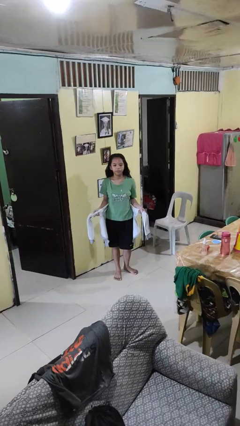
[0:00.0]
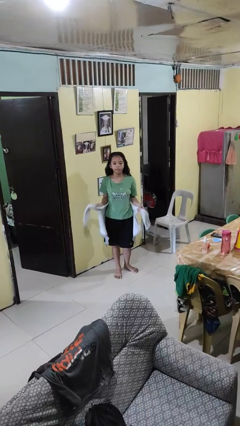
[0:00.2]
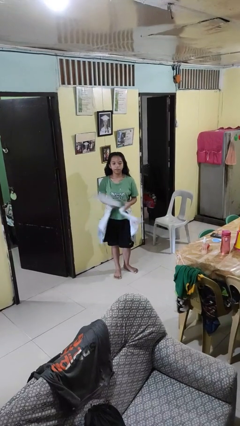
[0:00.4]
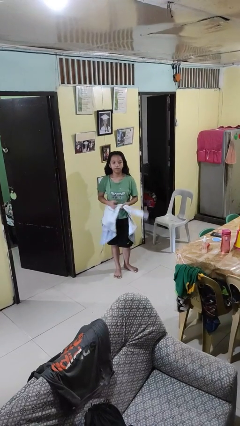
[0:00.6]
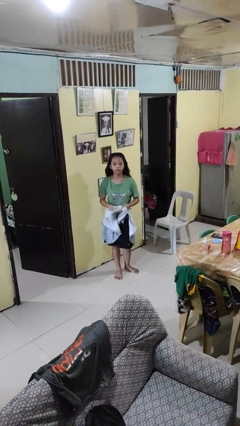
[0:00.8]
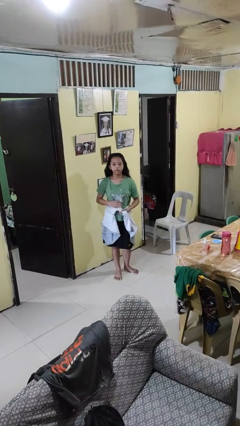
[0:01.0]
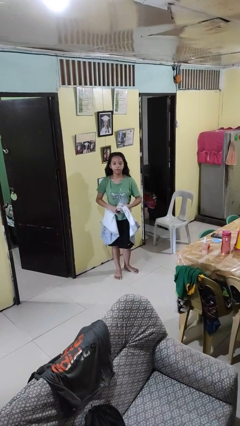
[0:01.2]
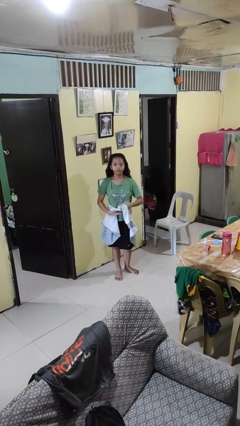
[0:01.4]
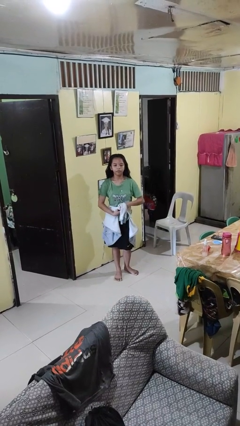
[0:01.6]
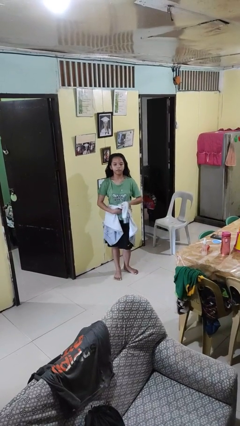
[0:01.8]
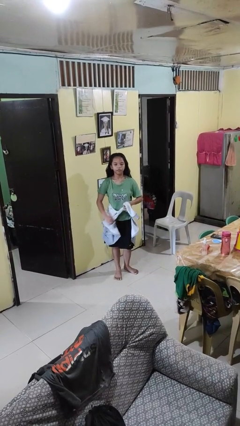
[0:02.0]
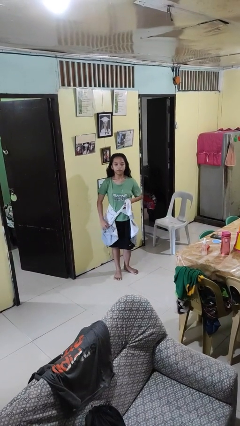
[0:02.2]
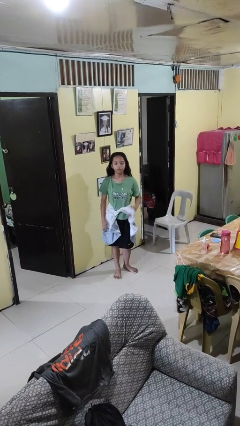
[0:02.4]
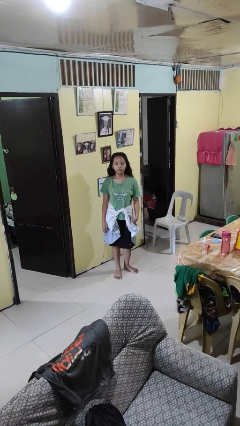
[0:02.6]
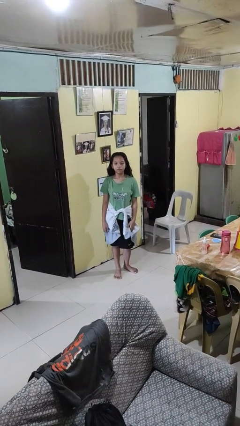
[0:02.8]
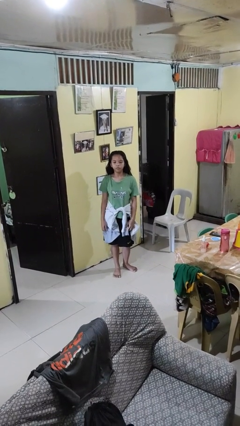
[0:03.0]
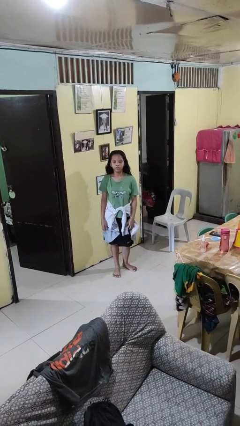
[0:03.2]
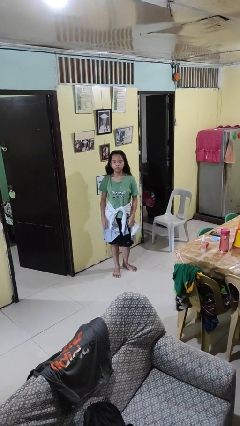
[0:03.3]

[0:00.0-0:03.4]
person ties jacket around waist

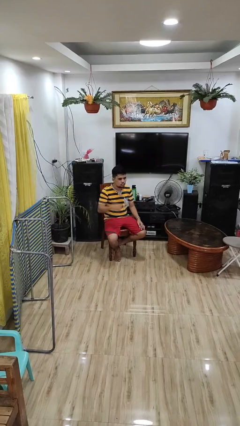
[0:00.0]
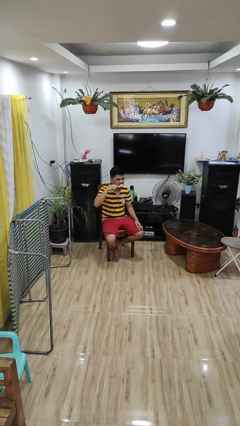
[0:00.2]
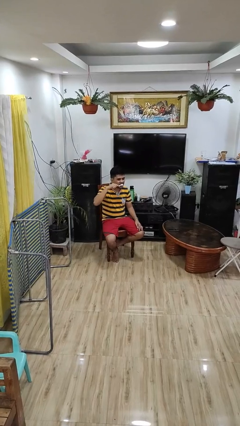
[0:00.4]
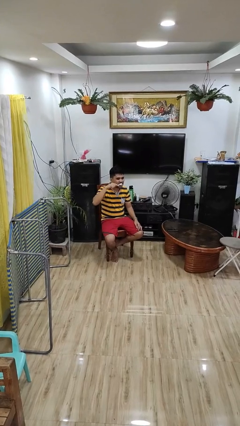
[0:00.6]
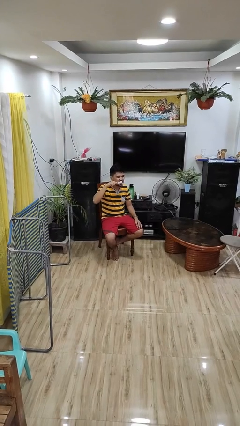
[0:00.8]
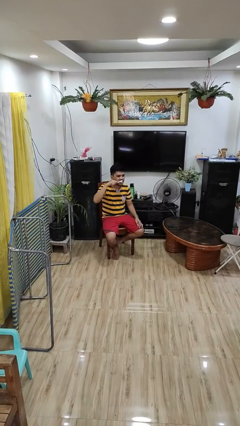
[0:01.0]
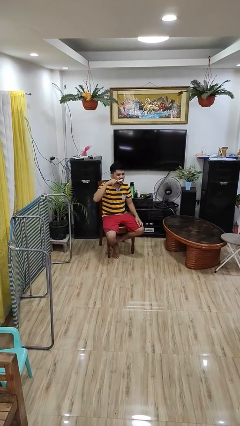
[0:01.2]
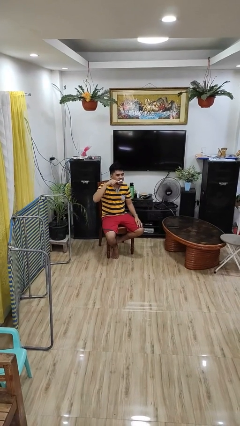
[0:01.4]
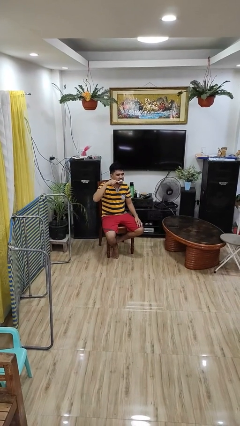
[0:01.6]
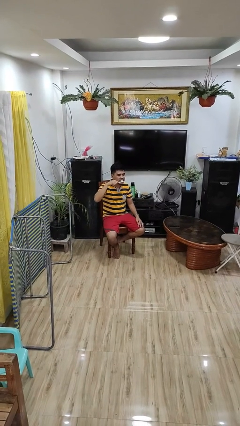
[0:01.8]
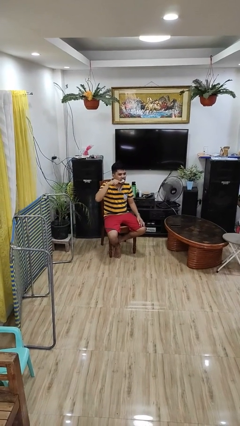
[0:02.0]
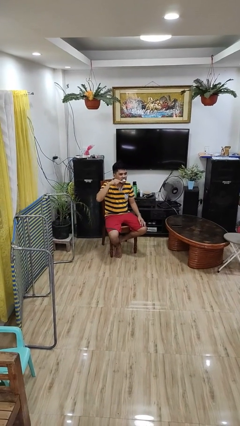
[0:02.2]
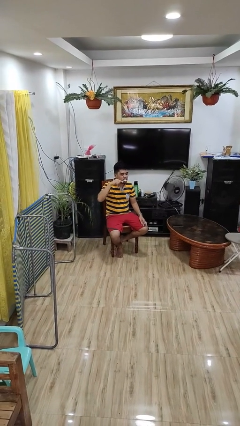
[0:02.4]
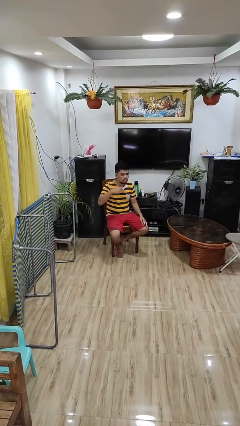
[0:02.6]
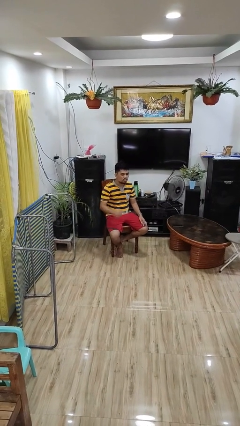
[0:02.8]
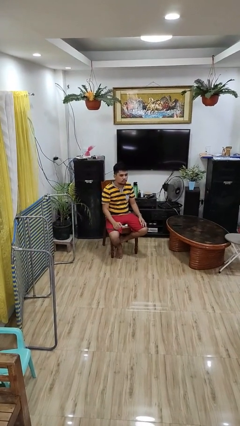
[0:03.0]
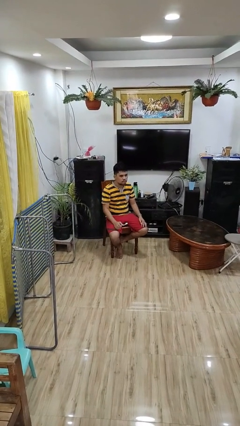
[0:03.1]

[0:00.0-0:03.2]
person brushes teeth

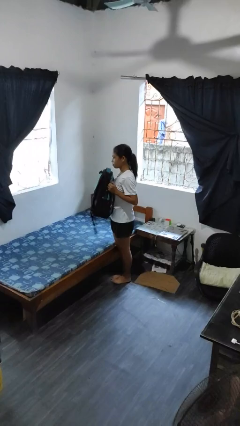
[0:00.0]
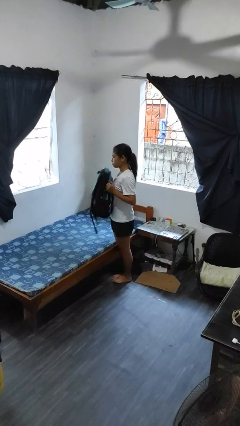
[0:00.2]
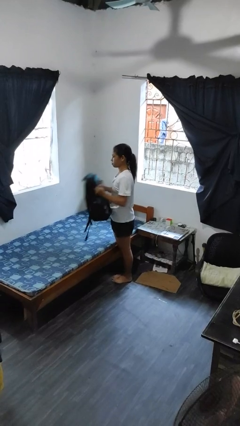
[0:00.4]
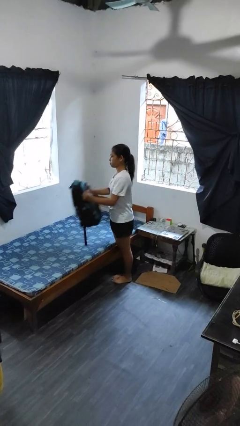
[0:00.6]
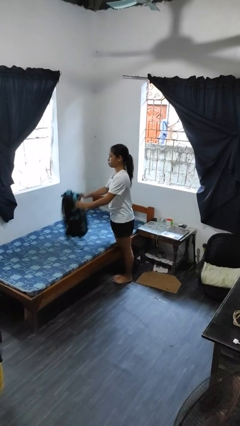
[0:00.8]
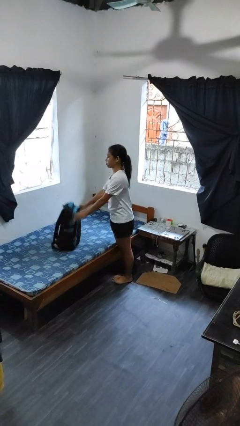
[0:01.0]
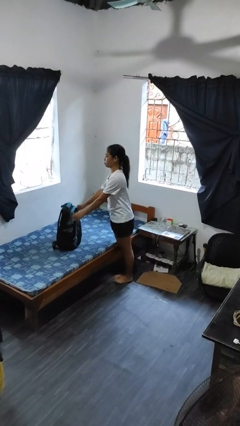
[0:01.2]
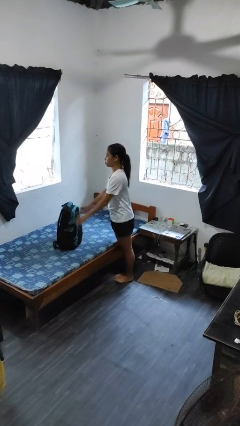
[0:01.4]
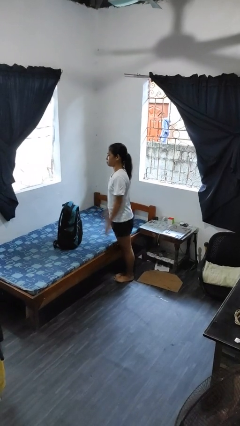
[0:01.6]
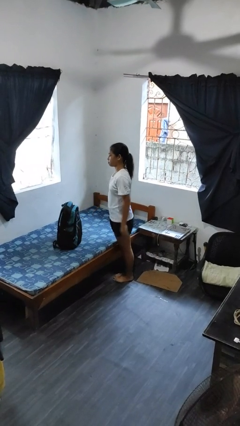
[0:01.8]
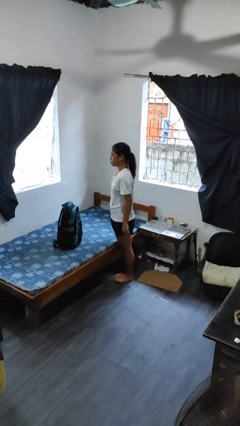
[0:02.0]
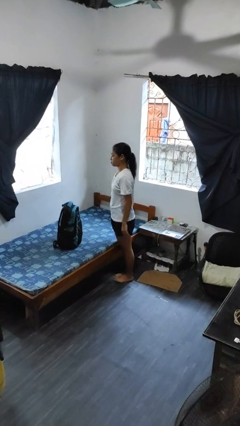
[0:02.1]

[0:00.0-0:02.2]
person puts down object on bed

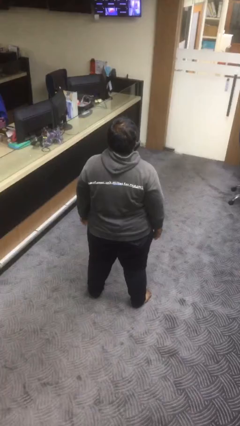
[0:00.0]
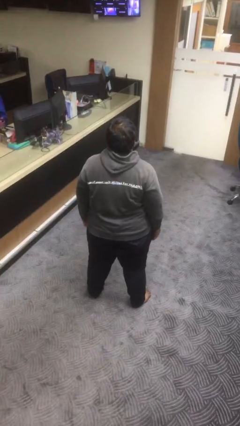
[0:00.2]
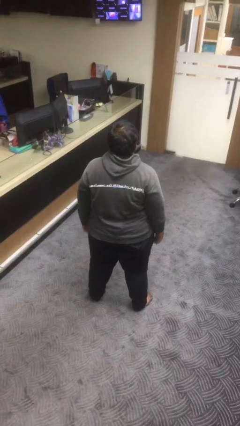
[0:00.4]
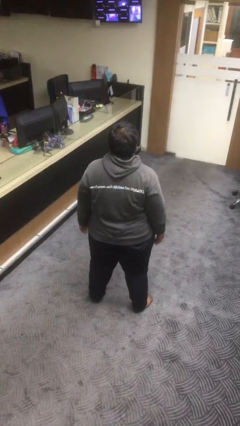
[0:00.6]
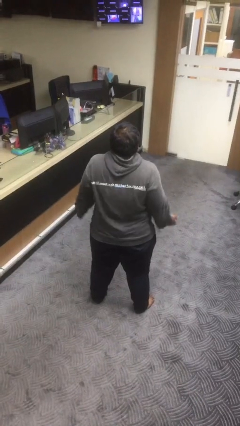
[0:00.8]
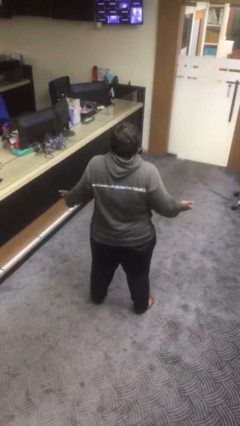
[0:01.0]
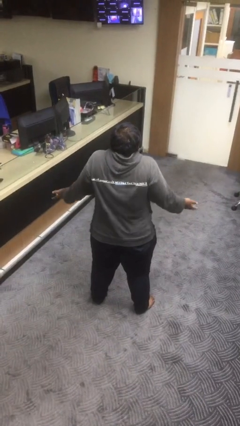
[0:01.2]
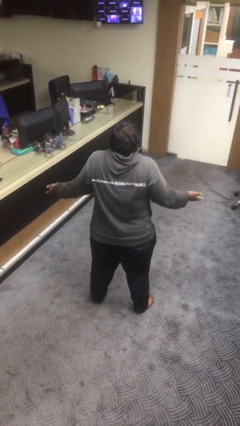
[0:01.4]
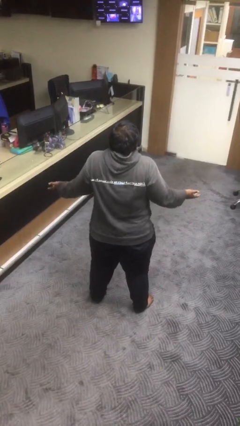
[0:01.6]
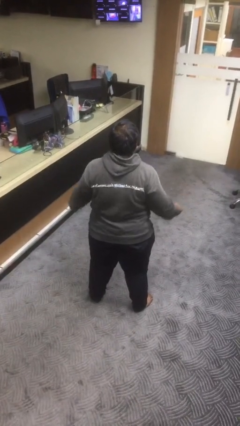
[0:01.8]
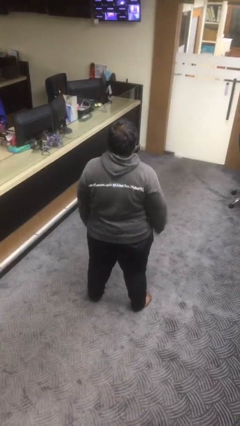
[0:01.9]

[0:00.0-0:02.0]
person shrugs

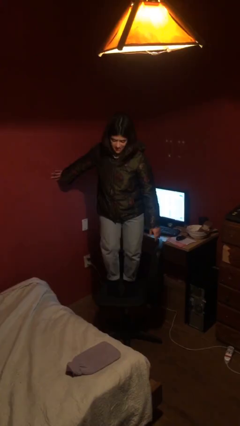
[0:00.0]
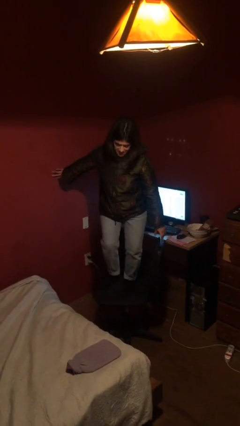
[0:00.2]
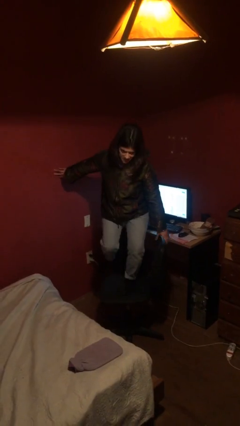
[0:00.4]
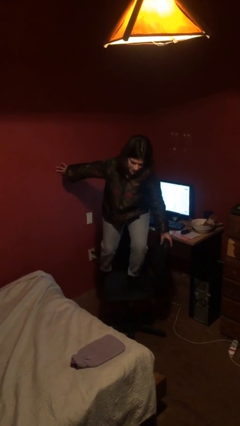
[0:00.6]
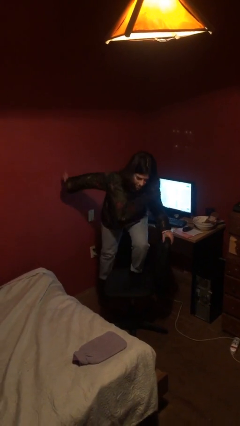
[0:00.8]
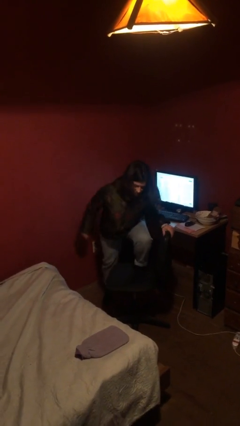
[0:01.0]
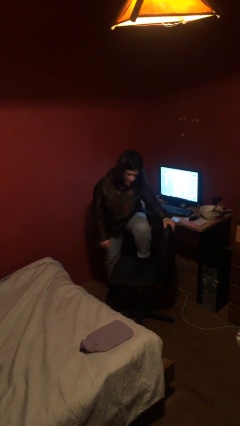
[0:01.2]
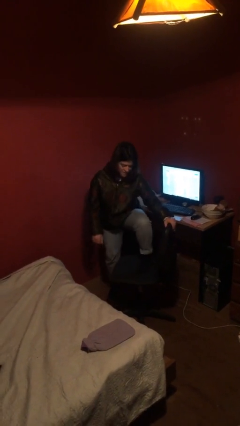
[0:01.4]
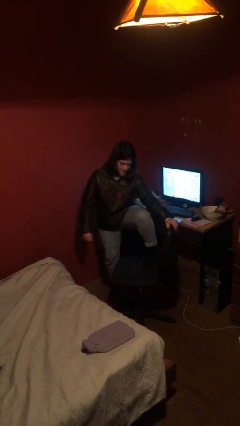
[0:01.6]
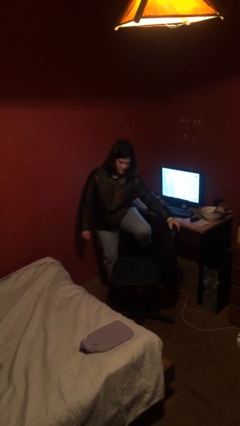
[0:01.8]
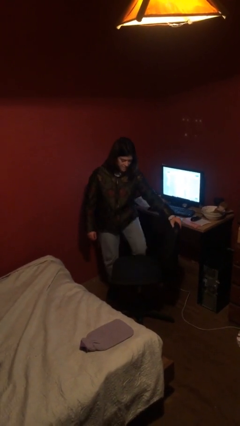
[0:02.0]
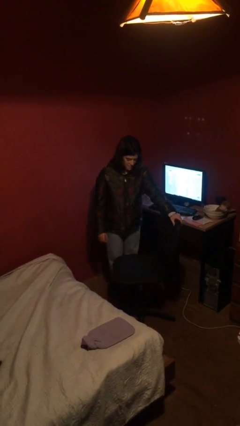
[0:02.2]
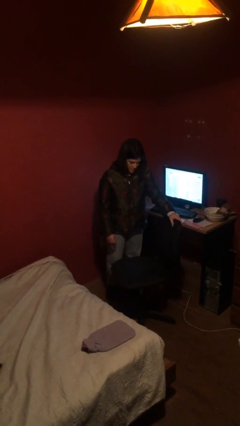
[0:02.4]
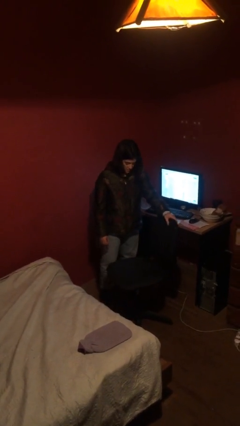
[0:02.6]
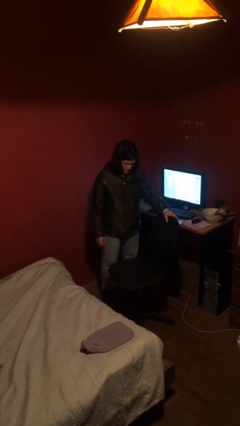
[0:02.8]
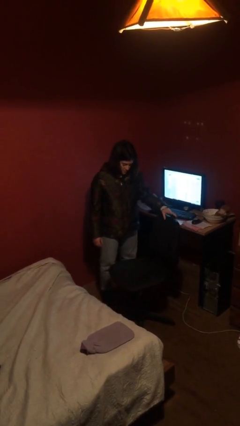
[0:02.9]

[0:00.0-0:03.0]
person climbs off chair

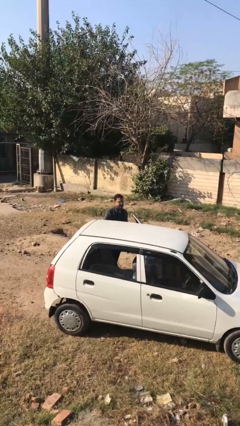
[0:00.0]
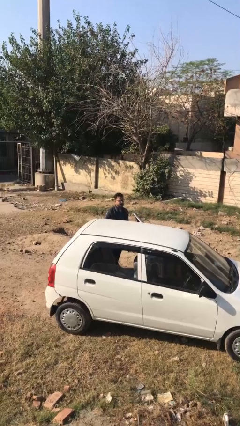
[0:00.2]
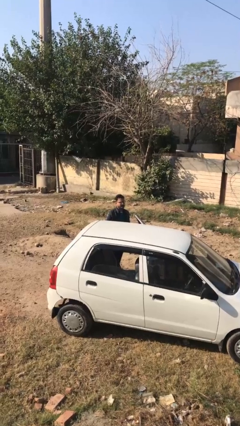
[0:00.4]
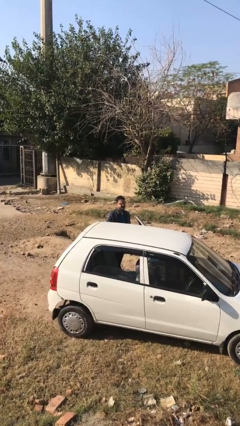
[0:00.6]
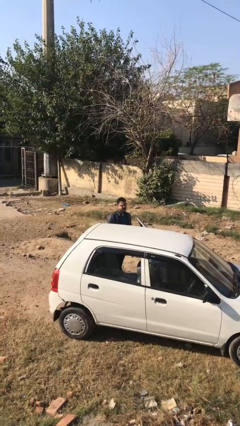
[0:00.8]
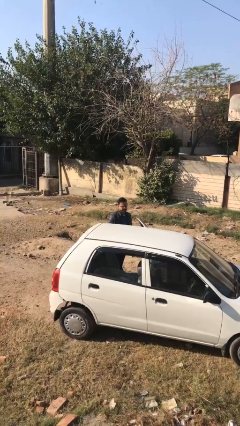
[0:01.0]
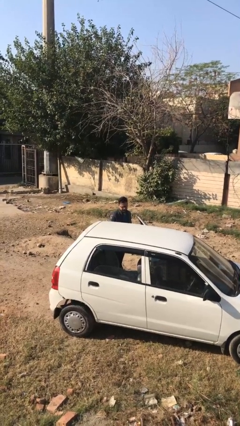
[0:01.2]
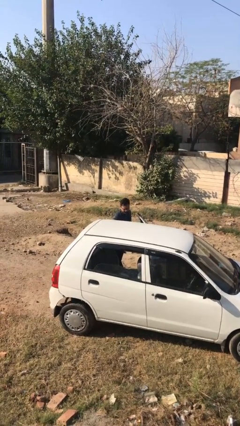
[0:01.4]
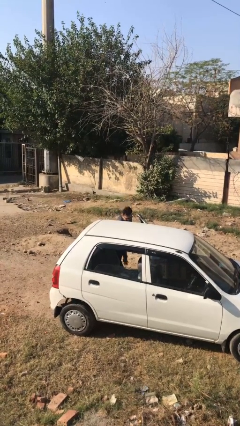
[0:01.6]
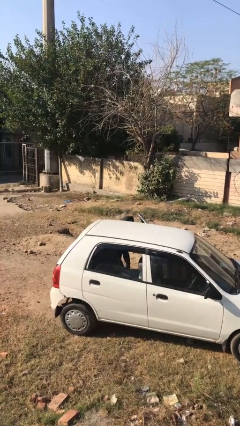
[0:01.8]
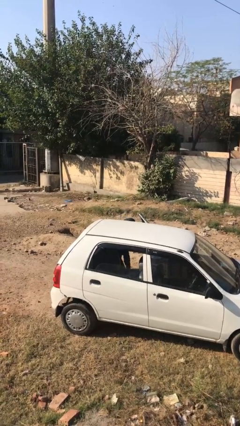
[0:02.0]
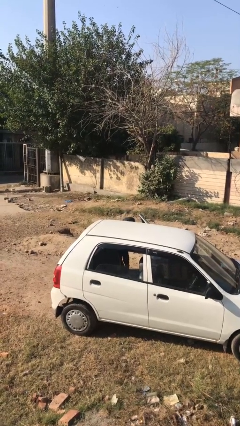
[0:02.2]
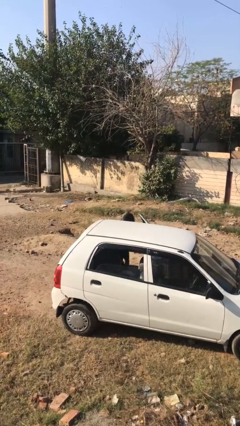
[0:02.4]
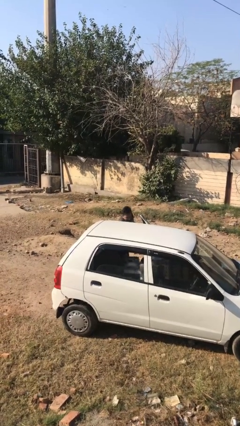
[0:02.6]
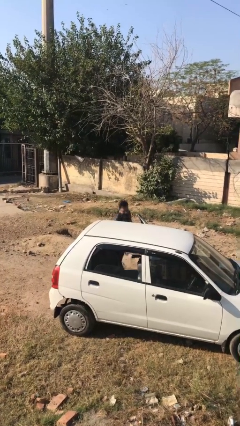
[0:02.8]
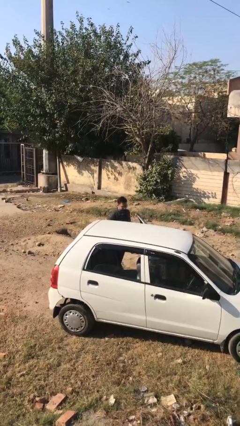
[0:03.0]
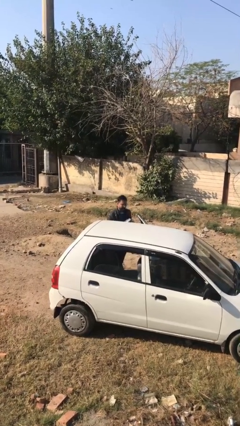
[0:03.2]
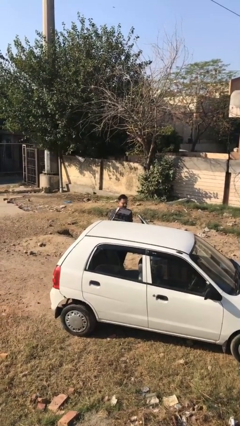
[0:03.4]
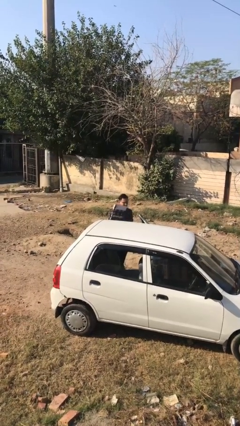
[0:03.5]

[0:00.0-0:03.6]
person unloads car
